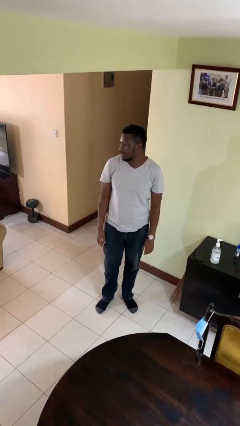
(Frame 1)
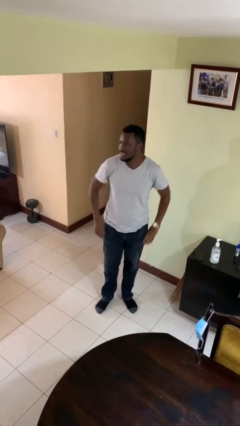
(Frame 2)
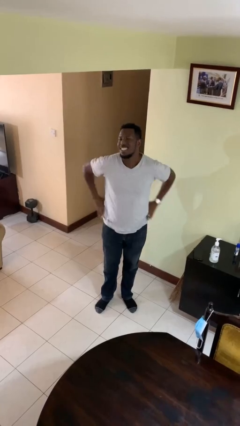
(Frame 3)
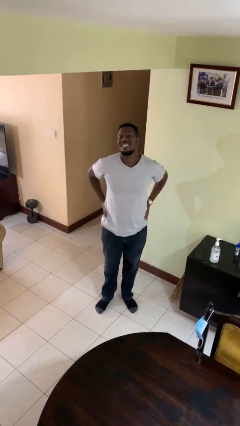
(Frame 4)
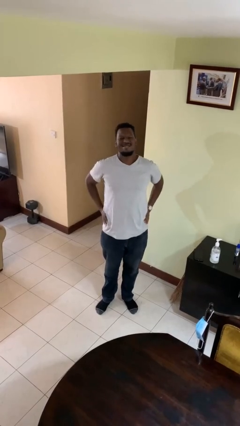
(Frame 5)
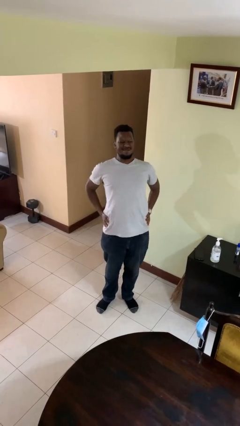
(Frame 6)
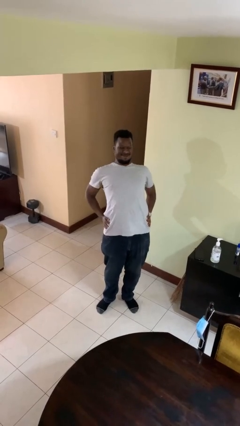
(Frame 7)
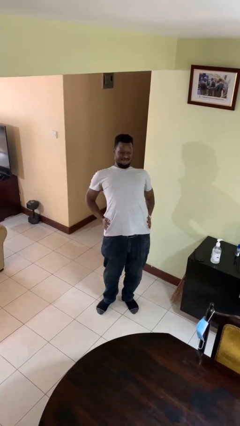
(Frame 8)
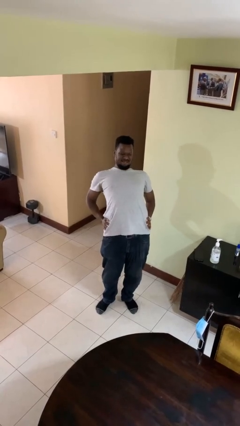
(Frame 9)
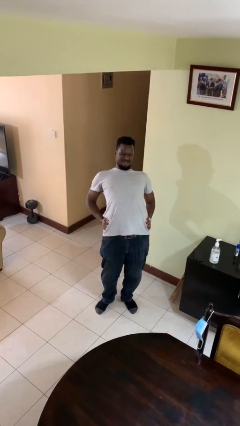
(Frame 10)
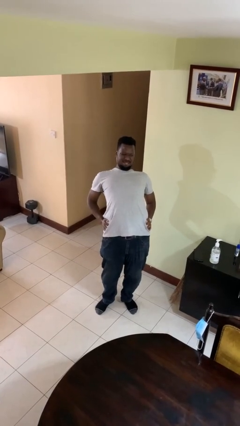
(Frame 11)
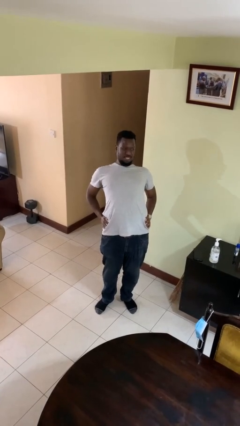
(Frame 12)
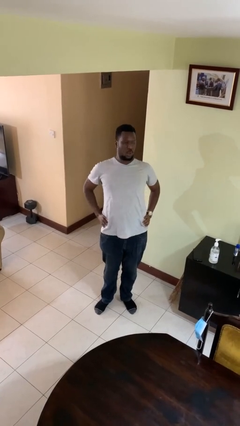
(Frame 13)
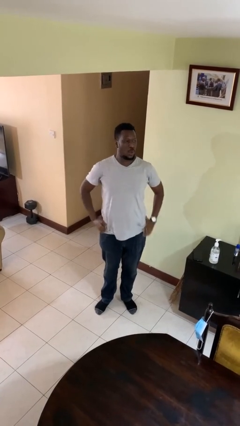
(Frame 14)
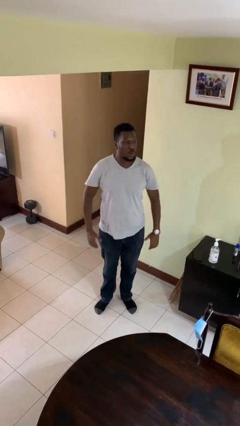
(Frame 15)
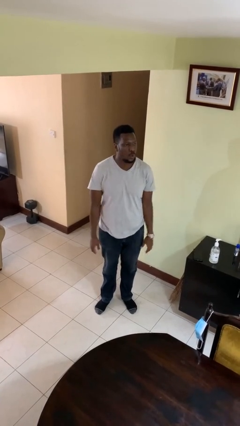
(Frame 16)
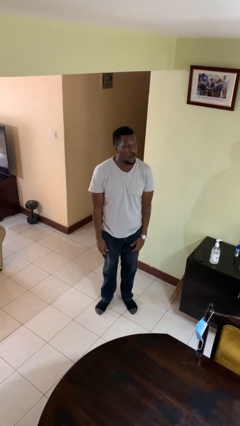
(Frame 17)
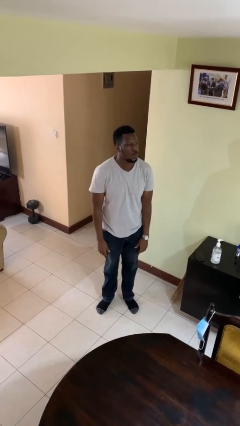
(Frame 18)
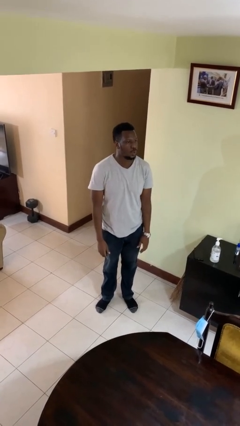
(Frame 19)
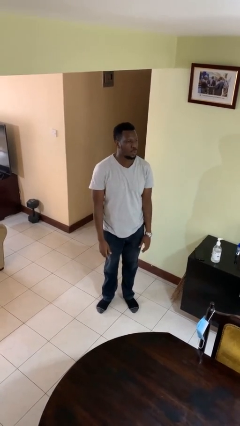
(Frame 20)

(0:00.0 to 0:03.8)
person stretches back

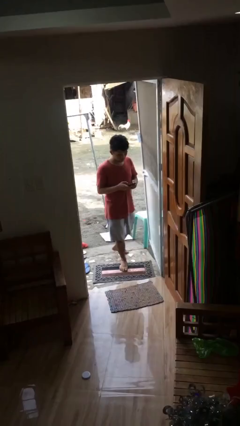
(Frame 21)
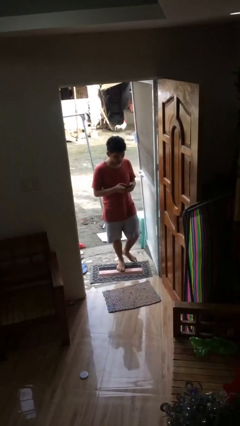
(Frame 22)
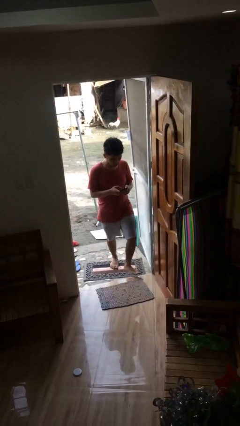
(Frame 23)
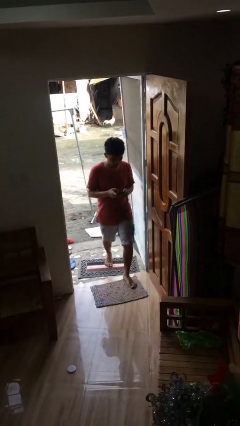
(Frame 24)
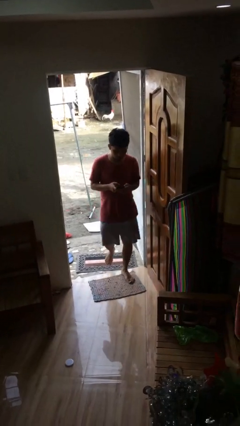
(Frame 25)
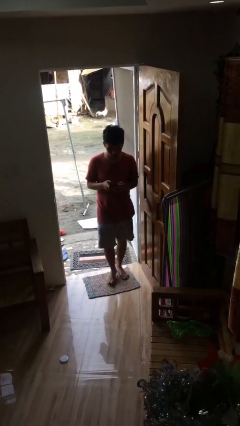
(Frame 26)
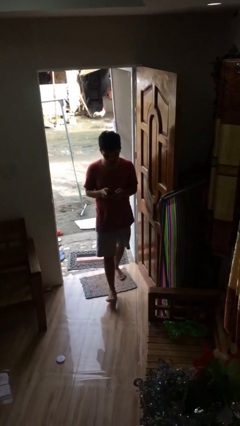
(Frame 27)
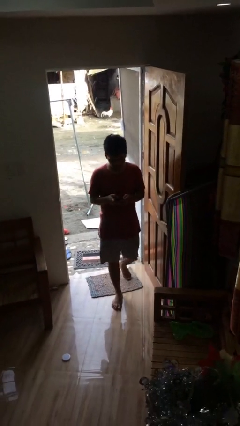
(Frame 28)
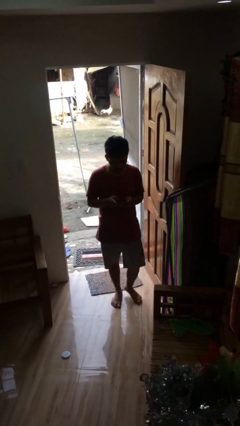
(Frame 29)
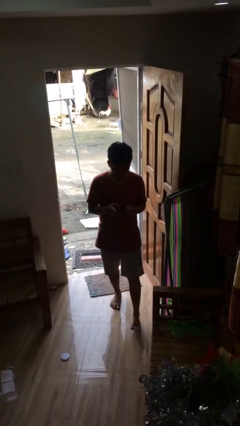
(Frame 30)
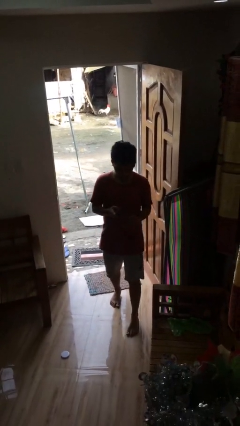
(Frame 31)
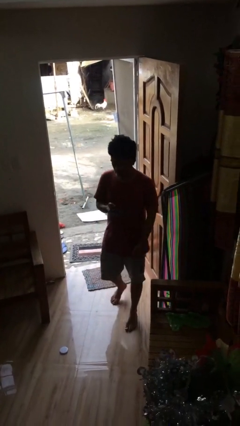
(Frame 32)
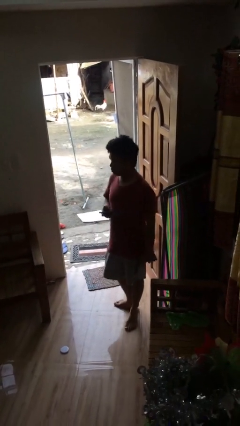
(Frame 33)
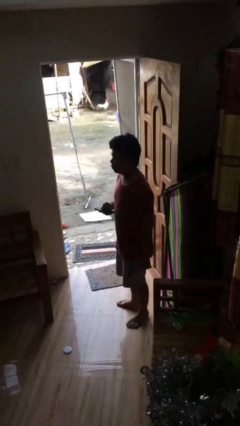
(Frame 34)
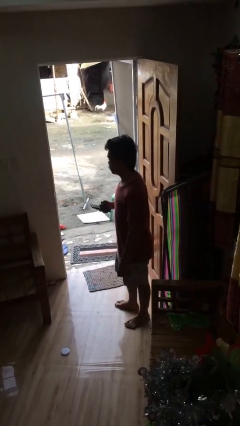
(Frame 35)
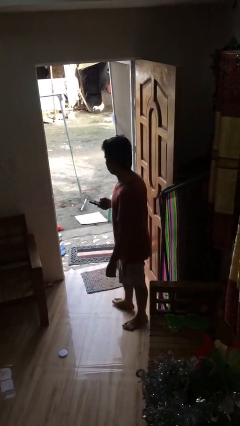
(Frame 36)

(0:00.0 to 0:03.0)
person enters scene through structure

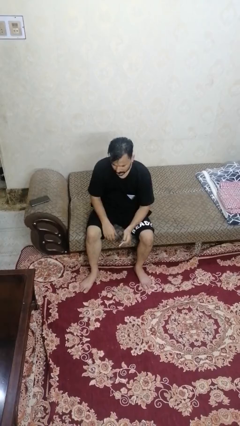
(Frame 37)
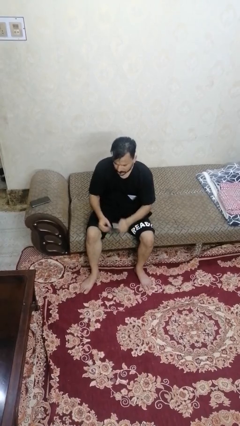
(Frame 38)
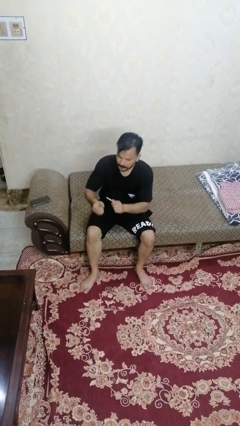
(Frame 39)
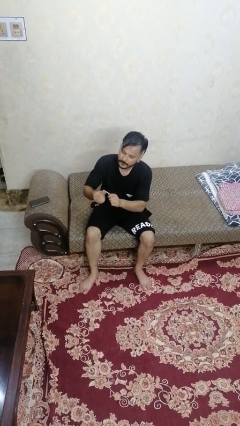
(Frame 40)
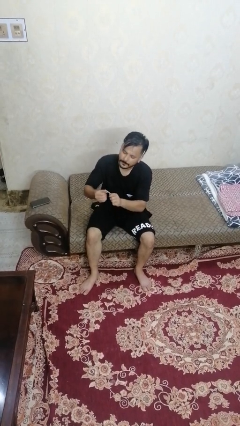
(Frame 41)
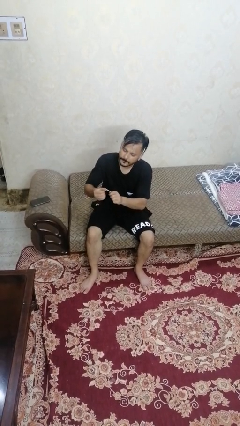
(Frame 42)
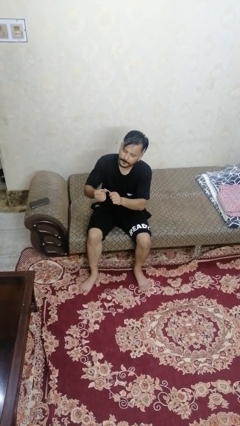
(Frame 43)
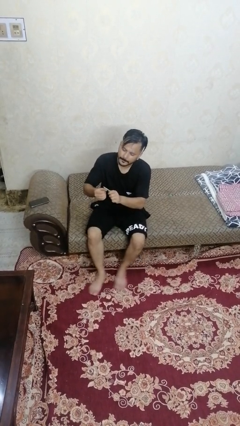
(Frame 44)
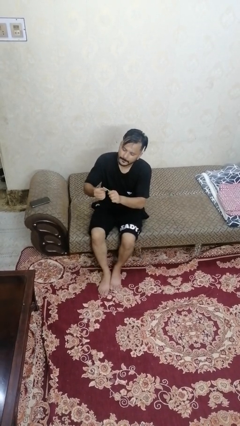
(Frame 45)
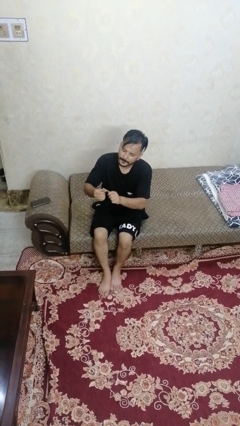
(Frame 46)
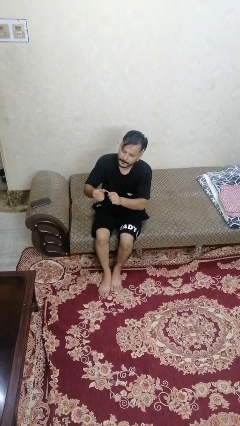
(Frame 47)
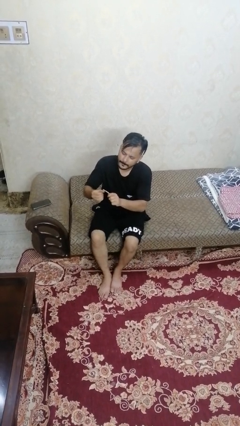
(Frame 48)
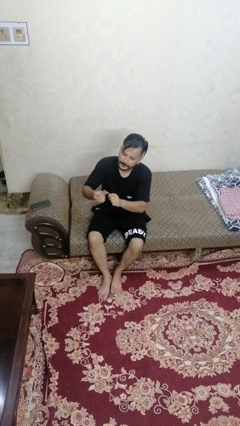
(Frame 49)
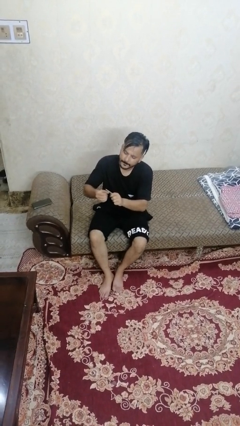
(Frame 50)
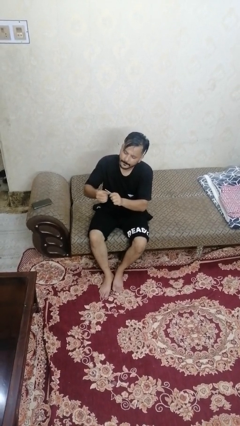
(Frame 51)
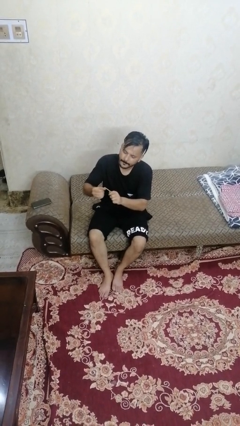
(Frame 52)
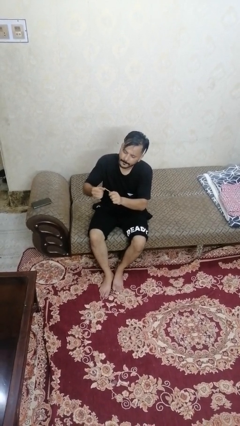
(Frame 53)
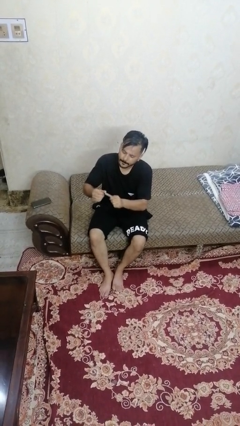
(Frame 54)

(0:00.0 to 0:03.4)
person files fingernails

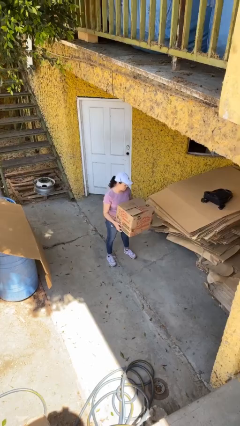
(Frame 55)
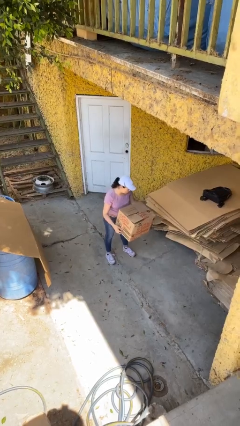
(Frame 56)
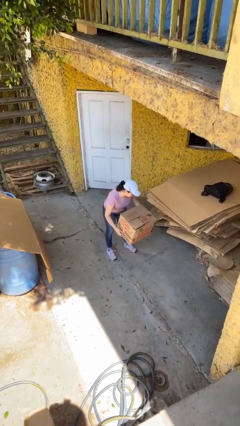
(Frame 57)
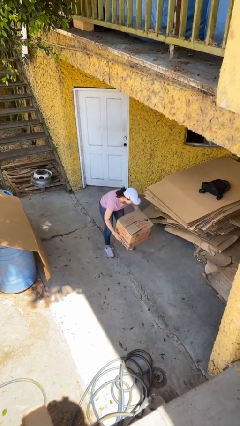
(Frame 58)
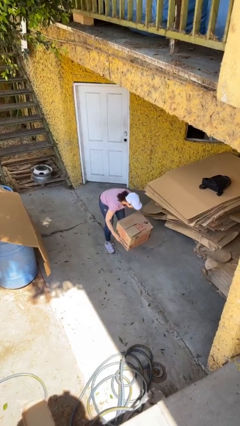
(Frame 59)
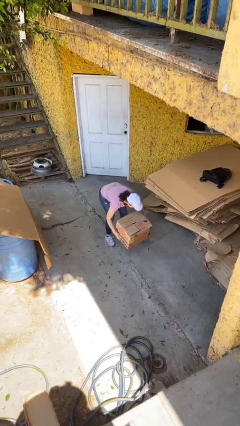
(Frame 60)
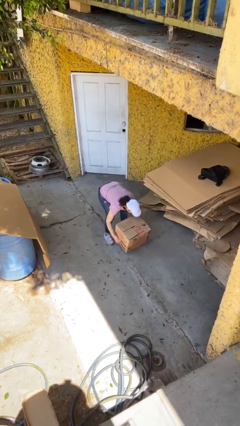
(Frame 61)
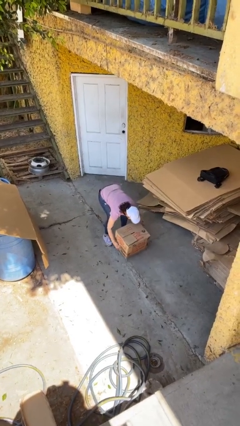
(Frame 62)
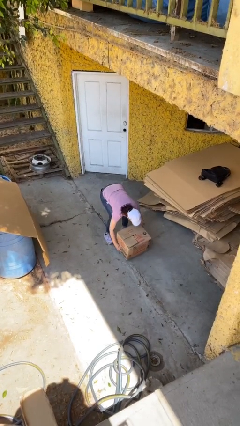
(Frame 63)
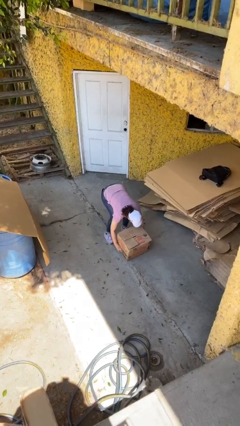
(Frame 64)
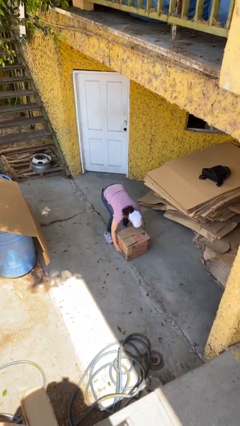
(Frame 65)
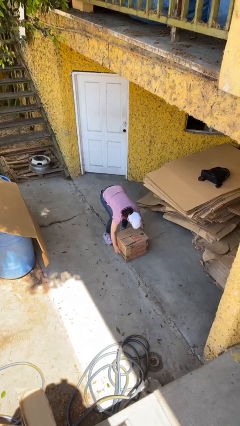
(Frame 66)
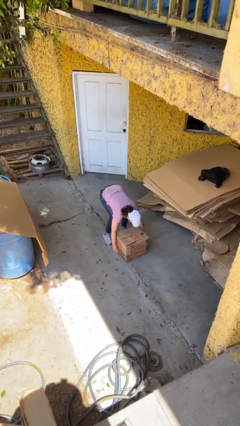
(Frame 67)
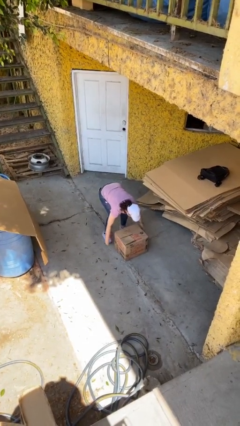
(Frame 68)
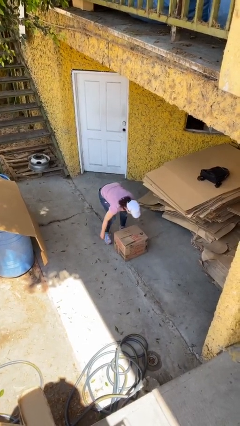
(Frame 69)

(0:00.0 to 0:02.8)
person puts down object on floor

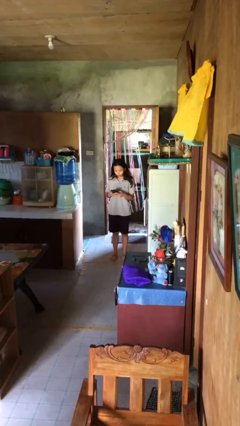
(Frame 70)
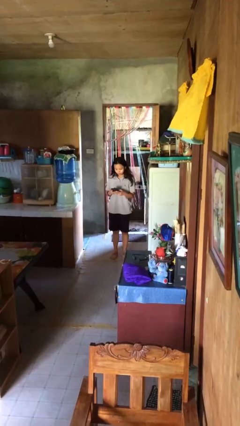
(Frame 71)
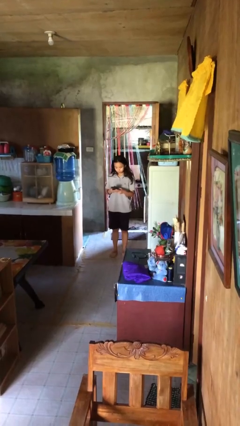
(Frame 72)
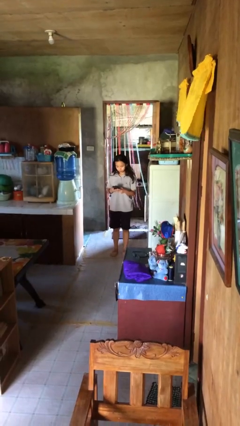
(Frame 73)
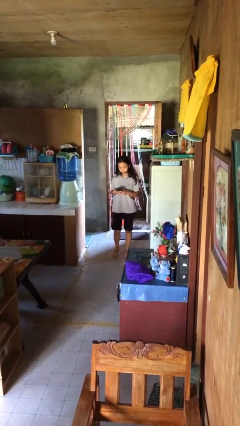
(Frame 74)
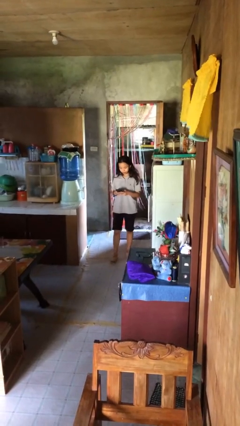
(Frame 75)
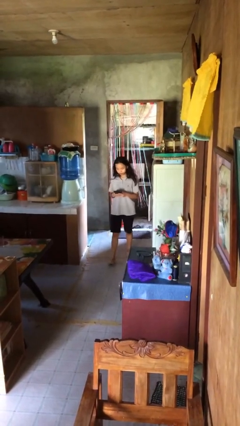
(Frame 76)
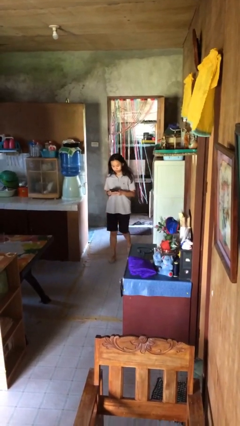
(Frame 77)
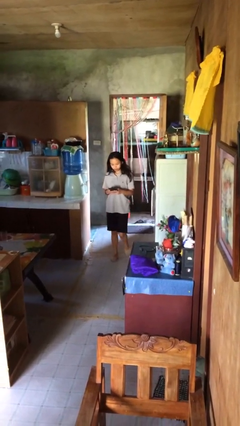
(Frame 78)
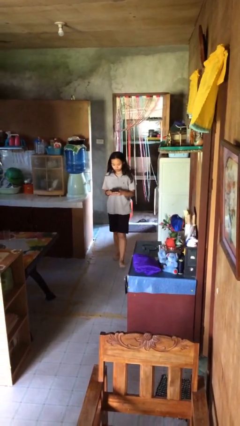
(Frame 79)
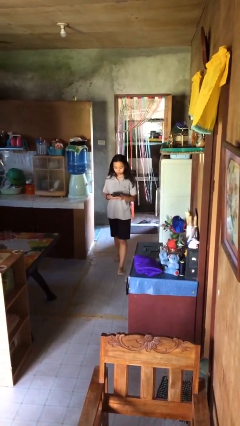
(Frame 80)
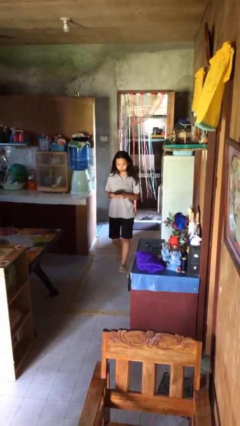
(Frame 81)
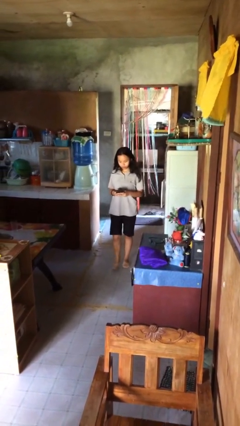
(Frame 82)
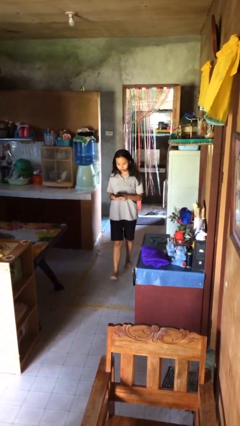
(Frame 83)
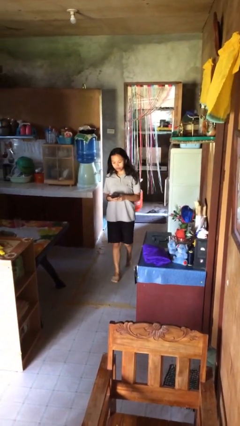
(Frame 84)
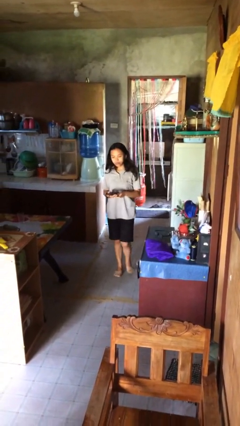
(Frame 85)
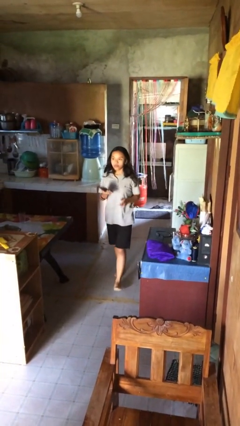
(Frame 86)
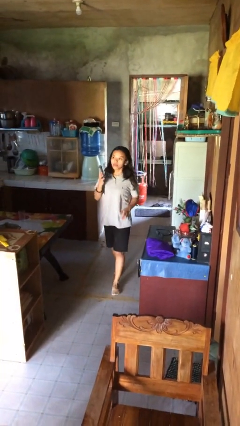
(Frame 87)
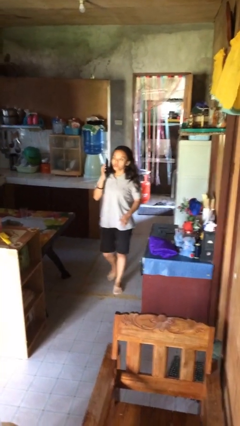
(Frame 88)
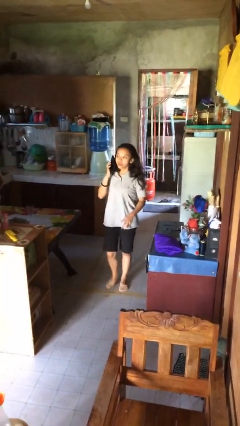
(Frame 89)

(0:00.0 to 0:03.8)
person texts on phone

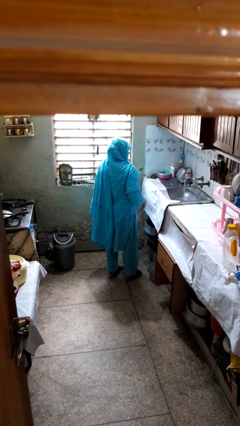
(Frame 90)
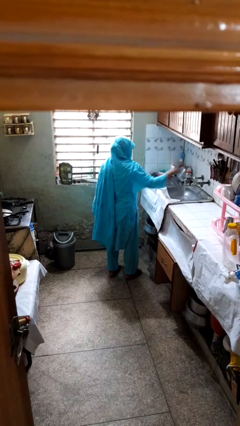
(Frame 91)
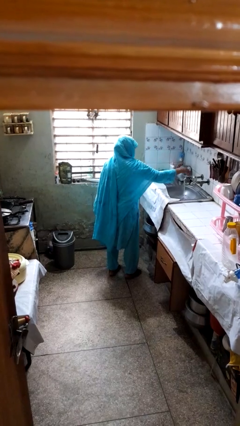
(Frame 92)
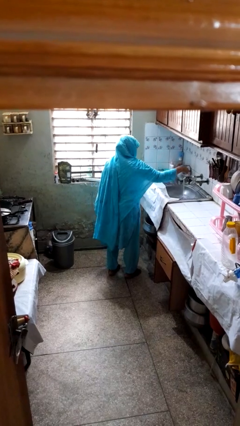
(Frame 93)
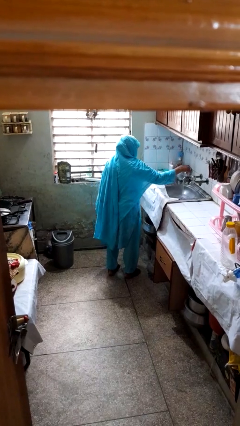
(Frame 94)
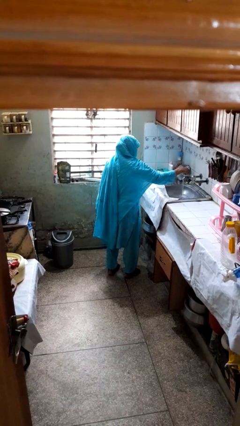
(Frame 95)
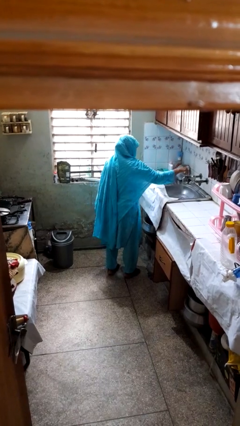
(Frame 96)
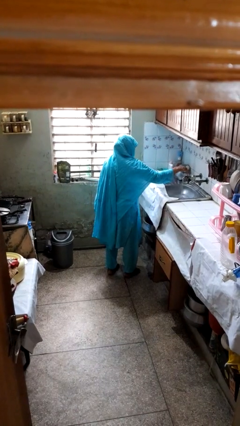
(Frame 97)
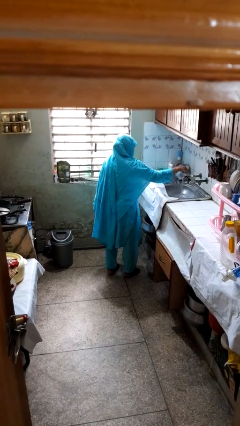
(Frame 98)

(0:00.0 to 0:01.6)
person turns off faucet
